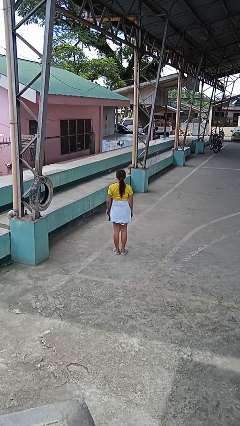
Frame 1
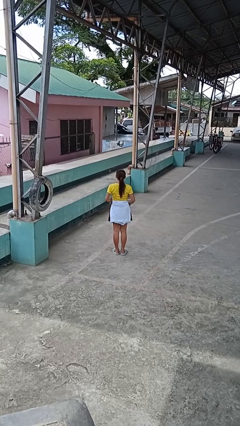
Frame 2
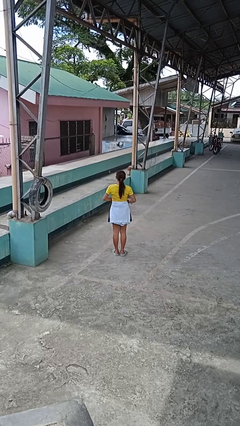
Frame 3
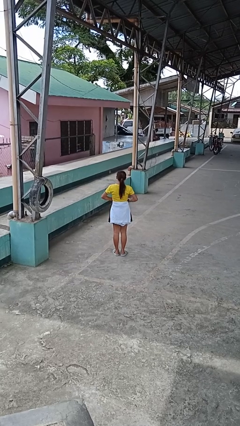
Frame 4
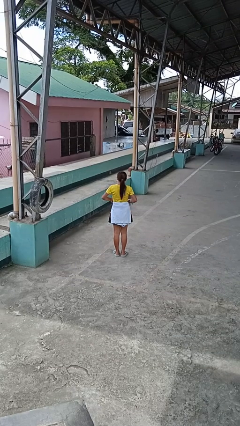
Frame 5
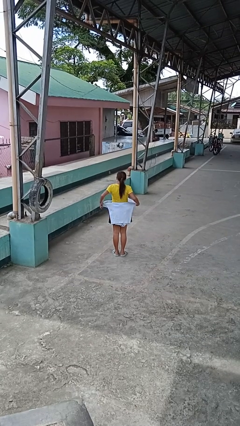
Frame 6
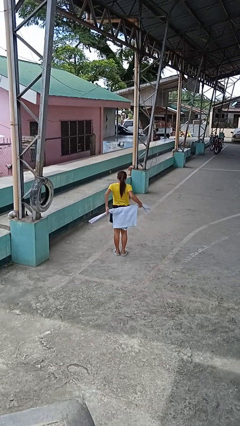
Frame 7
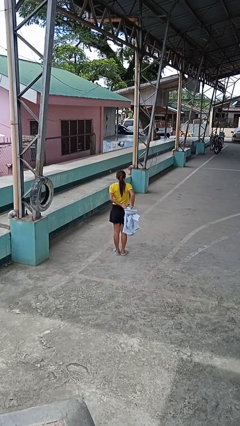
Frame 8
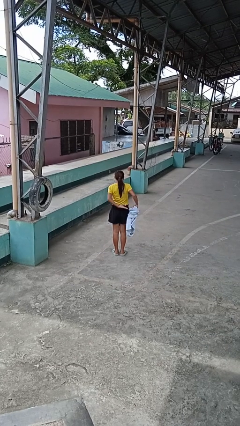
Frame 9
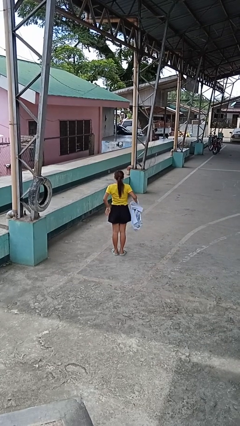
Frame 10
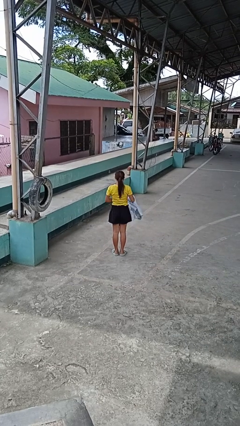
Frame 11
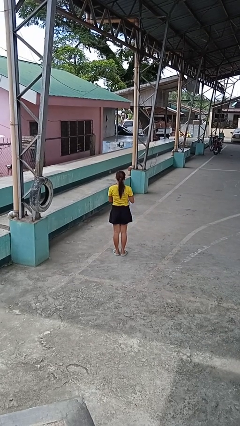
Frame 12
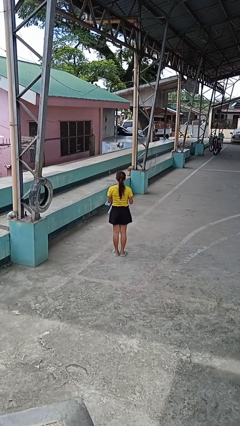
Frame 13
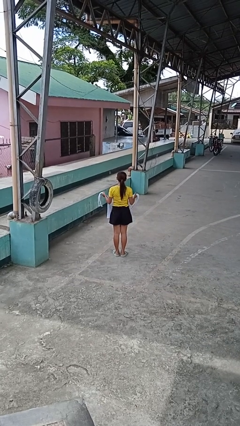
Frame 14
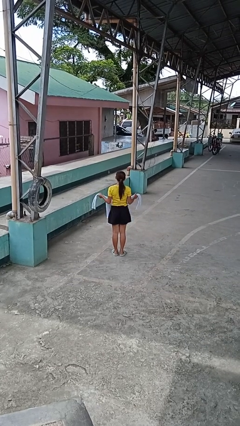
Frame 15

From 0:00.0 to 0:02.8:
person unties jacket around waist

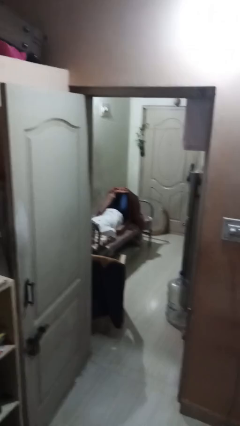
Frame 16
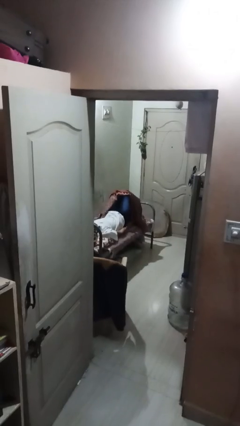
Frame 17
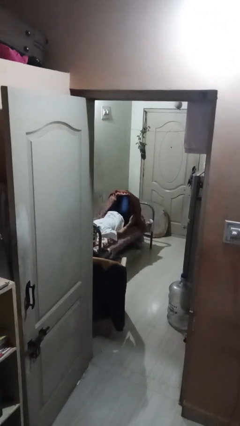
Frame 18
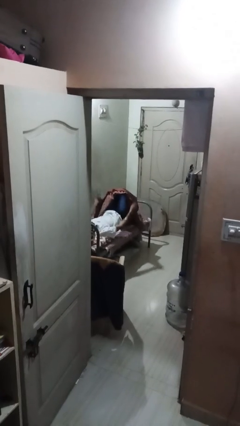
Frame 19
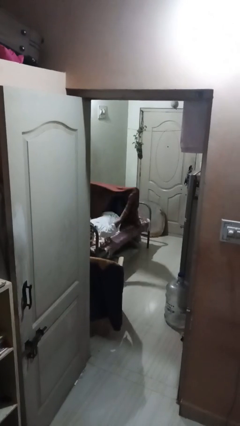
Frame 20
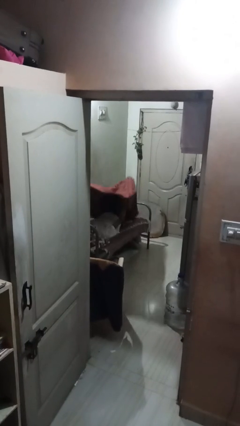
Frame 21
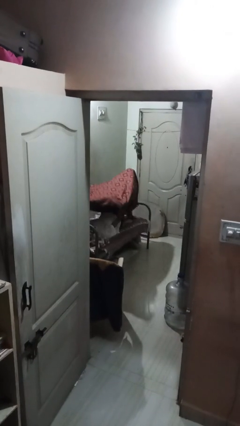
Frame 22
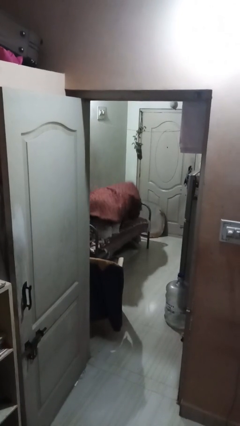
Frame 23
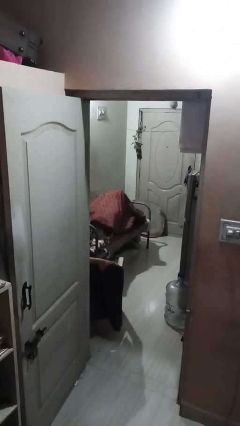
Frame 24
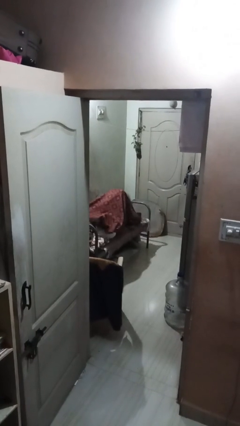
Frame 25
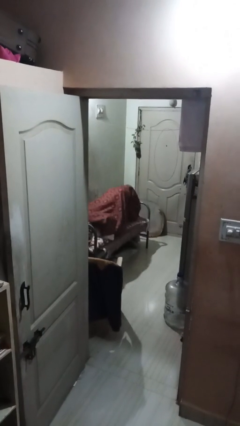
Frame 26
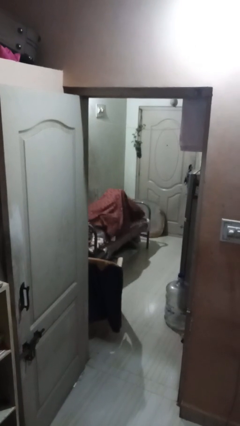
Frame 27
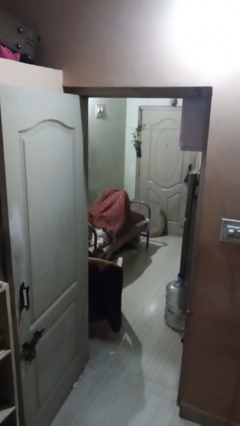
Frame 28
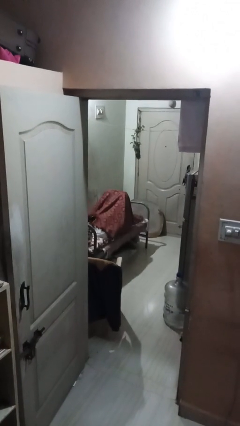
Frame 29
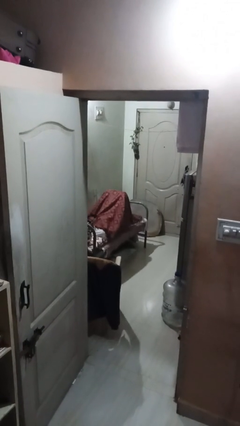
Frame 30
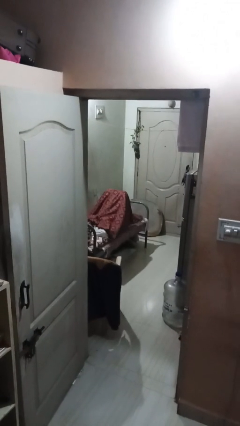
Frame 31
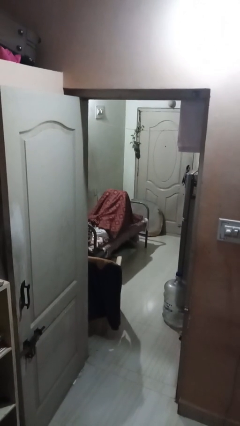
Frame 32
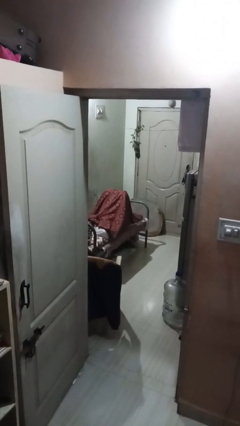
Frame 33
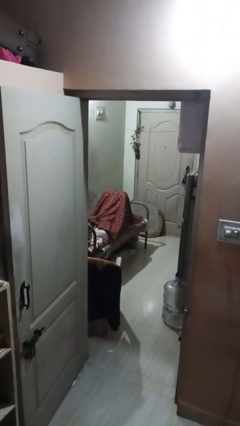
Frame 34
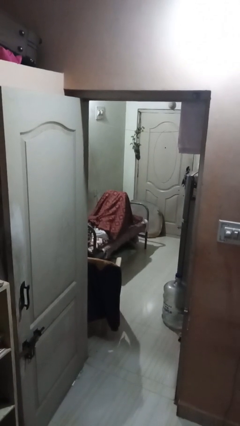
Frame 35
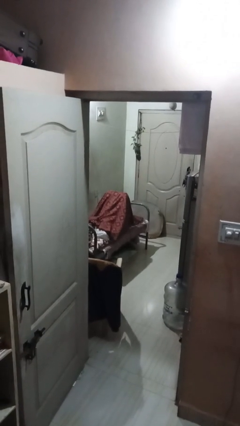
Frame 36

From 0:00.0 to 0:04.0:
person covers with bedsheets

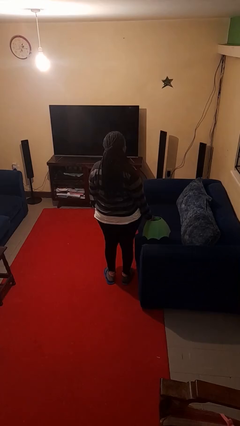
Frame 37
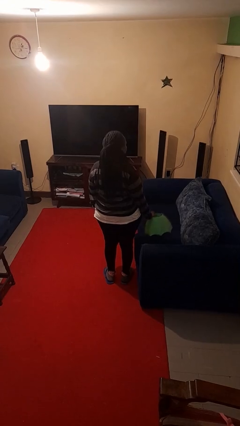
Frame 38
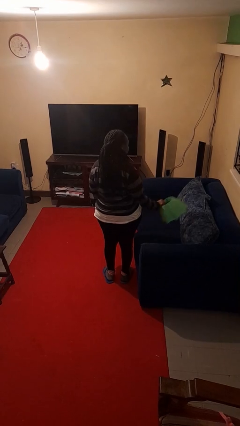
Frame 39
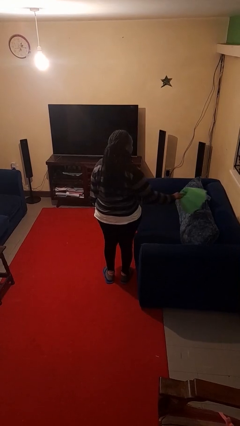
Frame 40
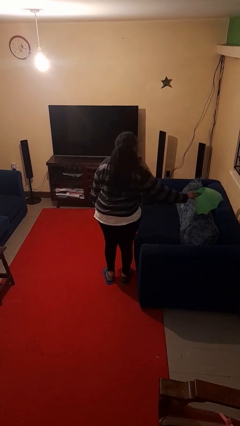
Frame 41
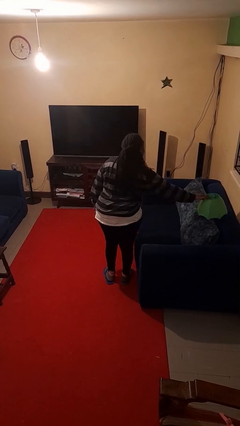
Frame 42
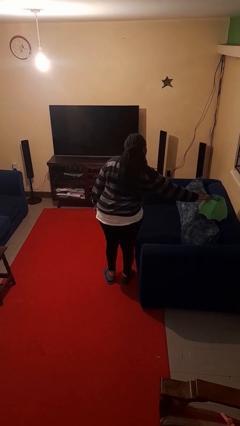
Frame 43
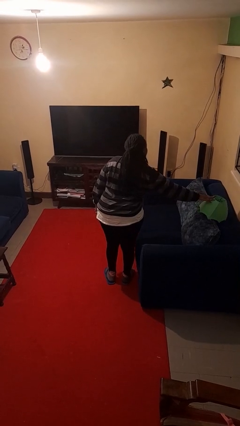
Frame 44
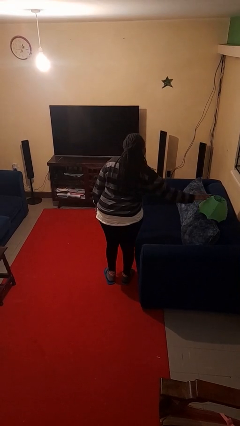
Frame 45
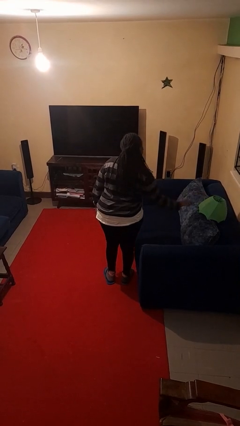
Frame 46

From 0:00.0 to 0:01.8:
person puts down object on couch

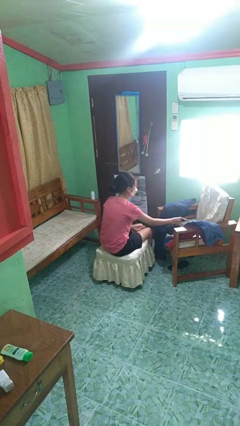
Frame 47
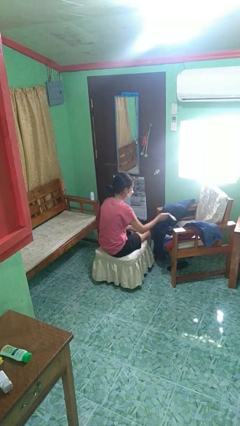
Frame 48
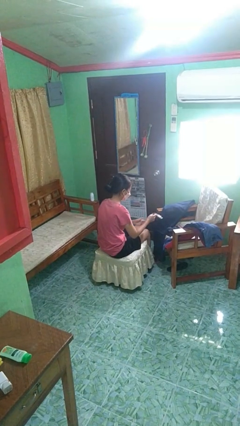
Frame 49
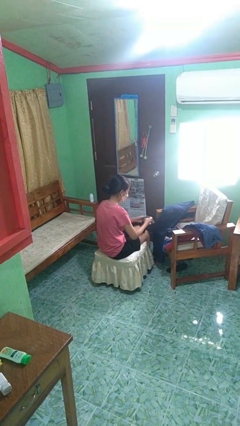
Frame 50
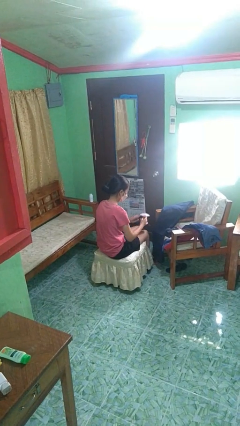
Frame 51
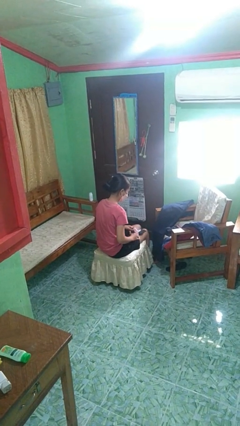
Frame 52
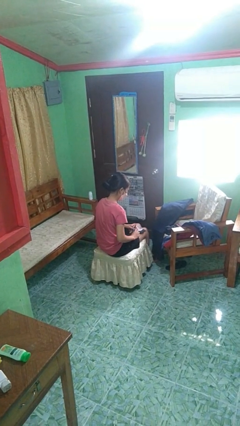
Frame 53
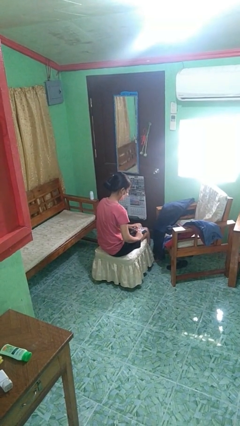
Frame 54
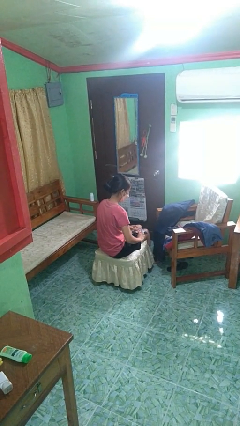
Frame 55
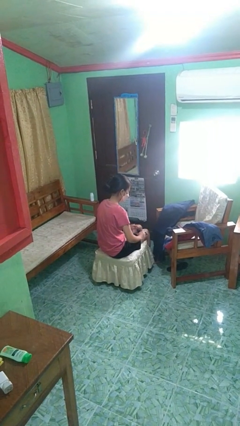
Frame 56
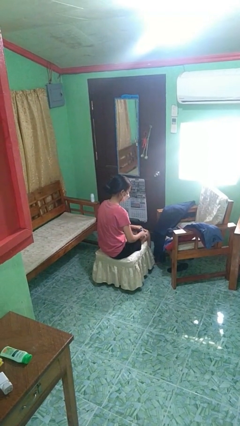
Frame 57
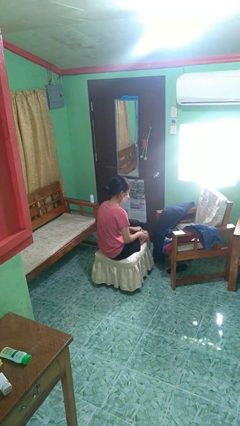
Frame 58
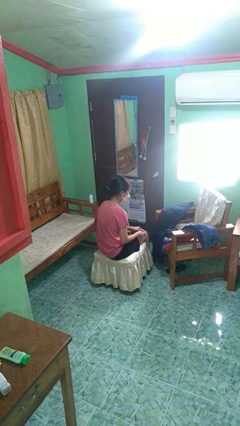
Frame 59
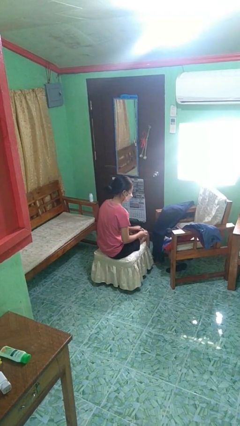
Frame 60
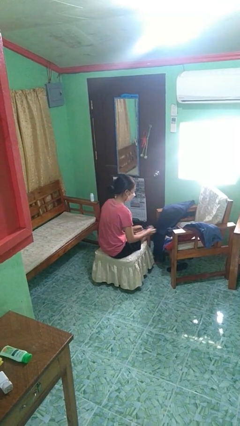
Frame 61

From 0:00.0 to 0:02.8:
person folds socks

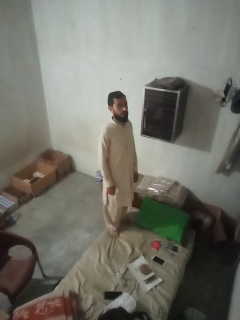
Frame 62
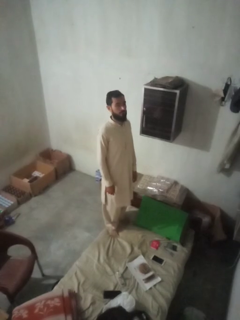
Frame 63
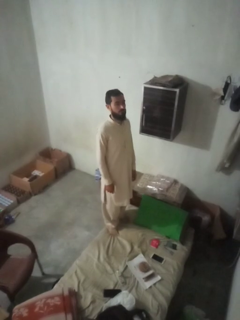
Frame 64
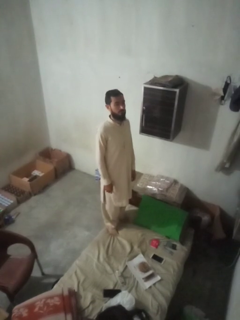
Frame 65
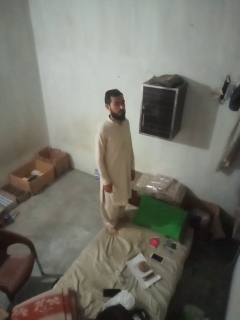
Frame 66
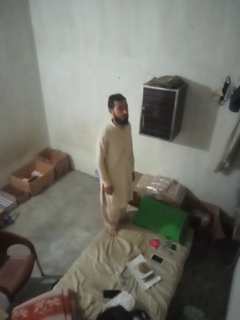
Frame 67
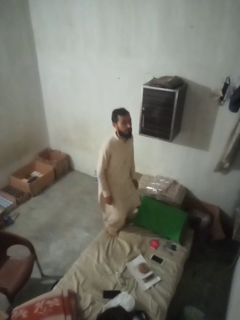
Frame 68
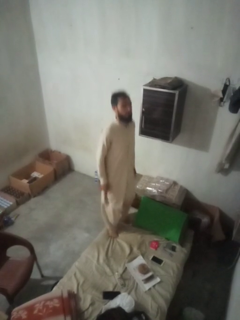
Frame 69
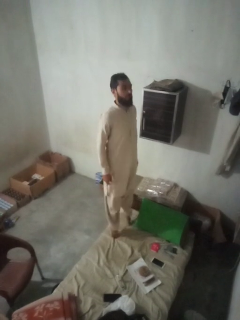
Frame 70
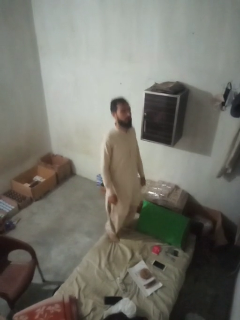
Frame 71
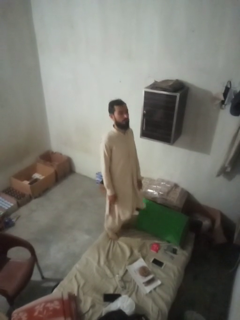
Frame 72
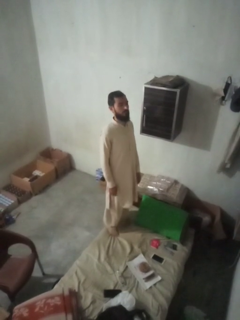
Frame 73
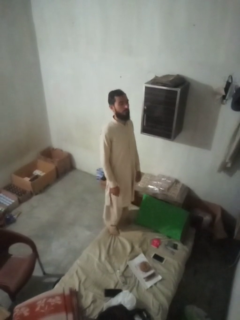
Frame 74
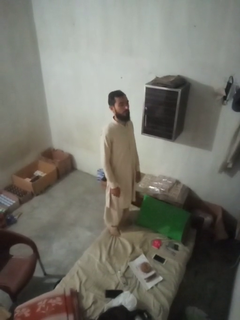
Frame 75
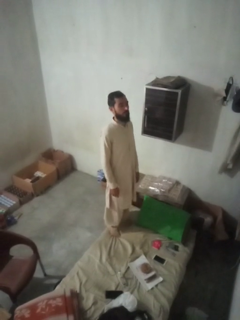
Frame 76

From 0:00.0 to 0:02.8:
person jumps on couch

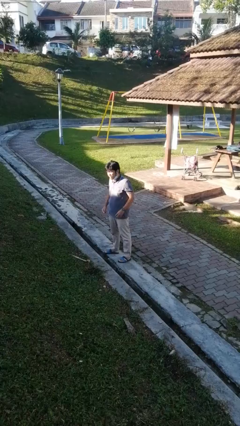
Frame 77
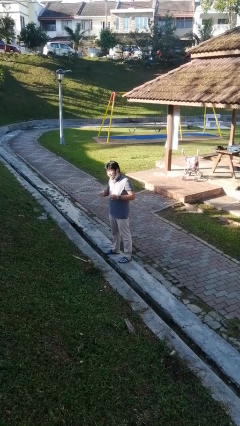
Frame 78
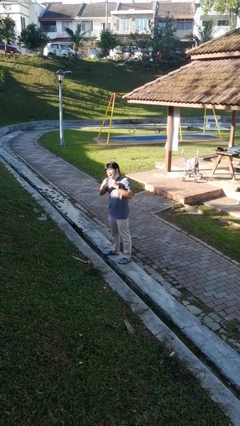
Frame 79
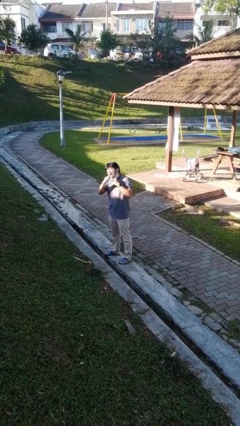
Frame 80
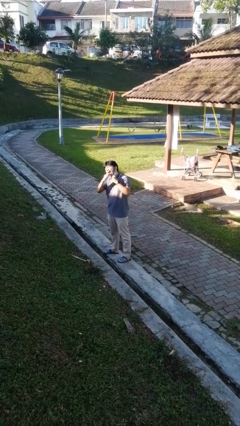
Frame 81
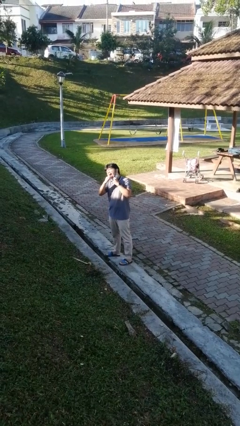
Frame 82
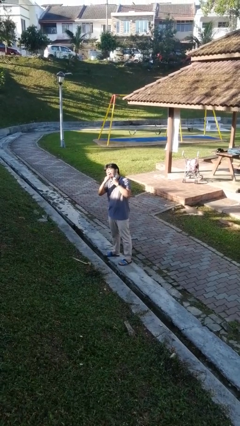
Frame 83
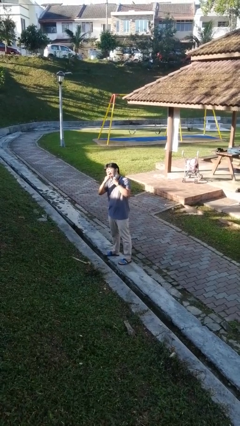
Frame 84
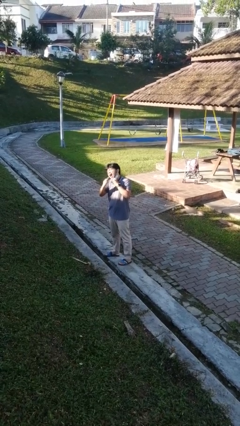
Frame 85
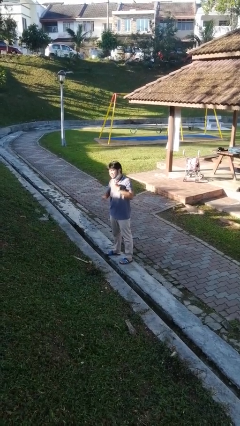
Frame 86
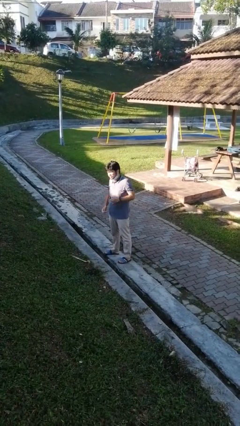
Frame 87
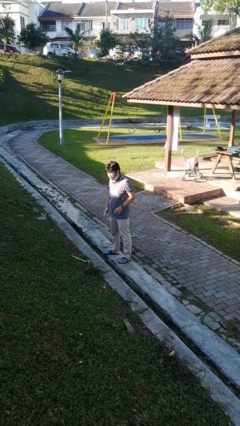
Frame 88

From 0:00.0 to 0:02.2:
person flosses

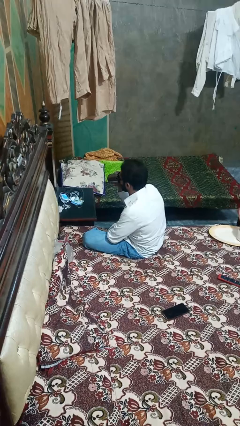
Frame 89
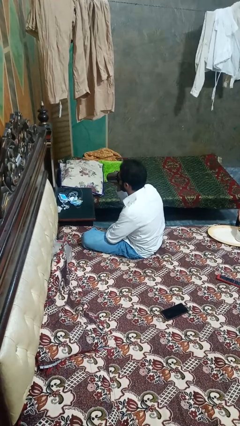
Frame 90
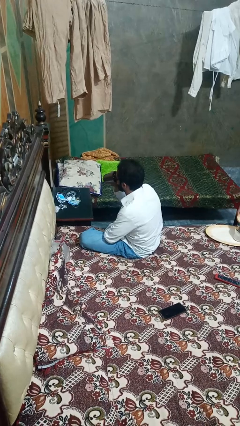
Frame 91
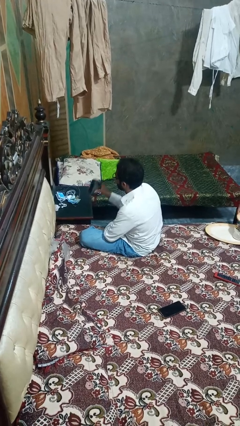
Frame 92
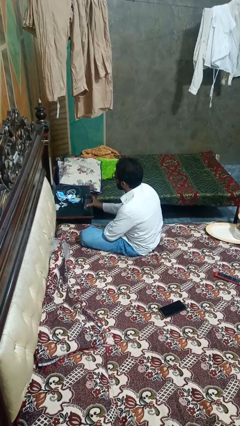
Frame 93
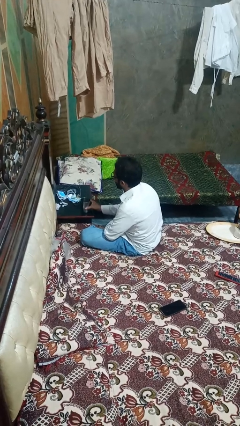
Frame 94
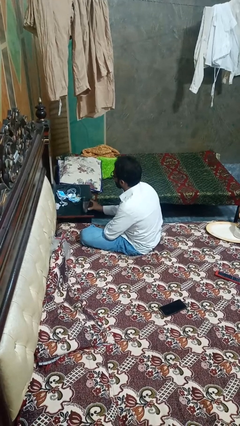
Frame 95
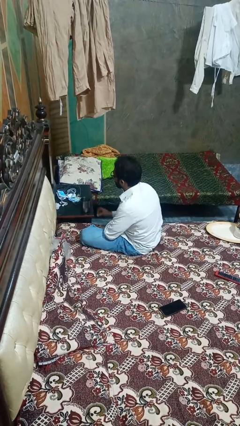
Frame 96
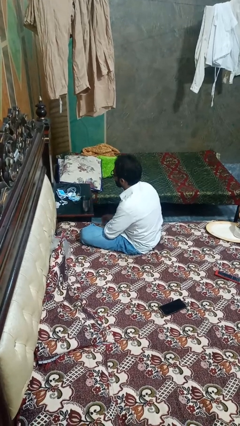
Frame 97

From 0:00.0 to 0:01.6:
person puts down object on table
